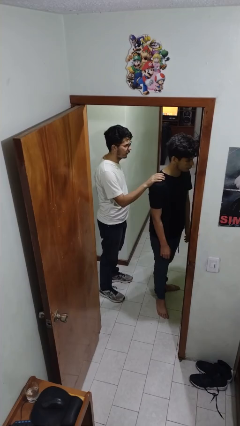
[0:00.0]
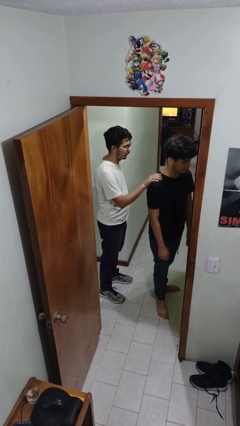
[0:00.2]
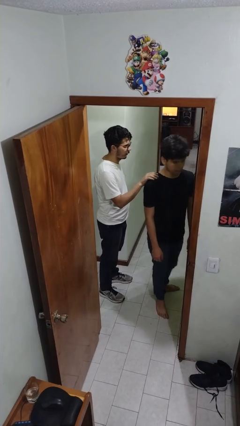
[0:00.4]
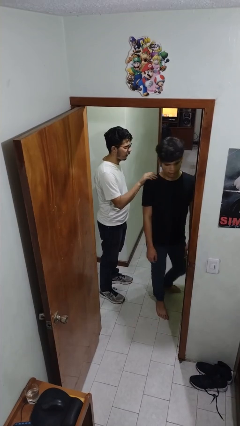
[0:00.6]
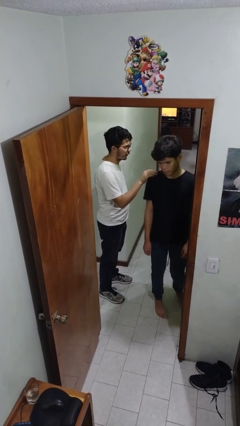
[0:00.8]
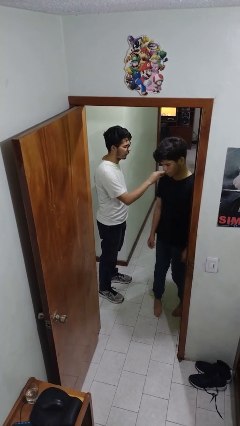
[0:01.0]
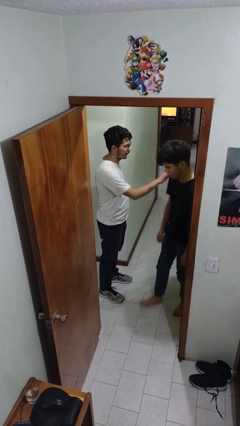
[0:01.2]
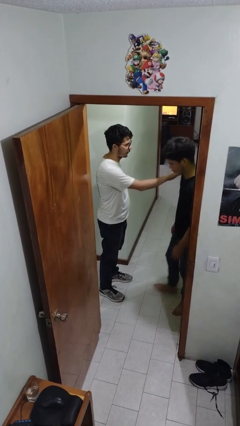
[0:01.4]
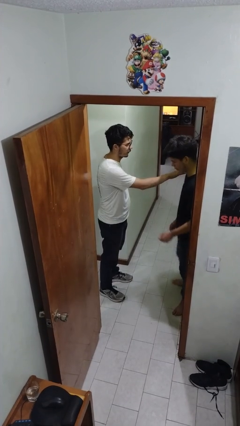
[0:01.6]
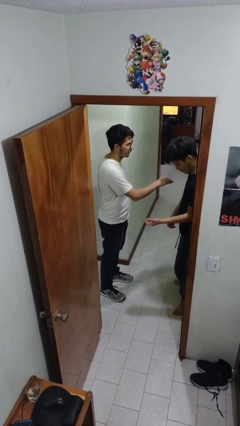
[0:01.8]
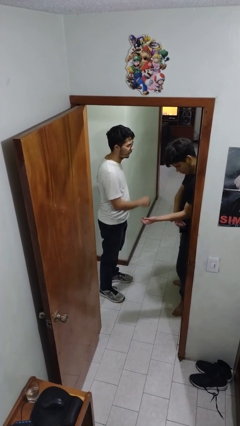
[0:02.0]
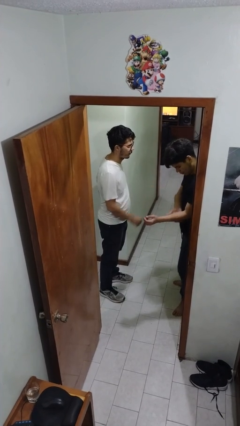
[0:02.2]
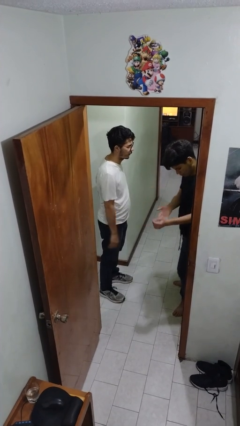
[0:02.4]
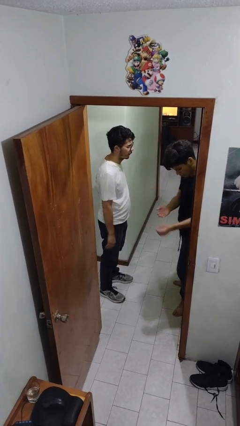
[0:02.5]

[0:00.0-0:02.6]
person spins person around

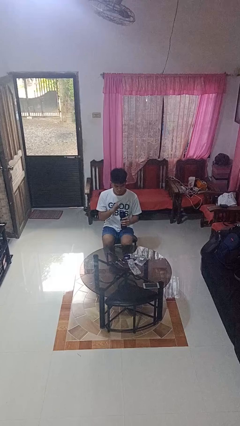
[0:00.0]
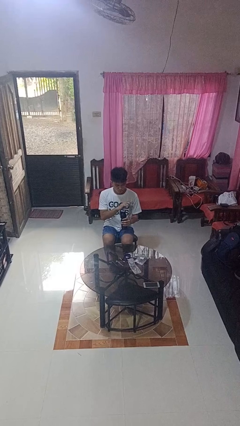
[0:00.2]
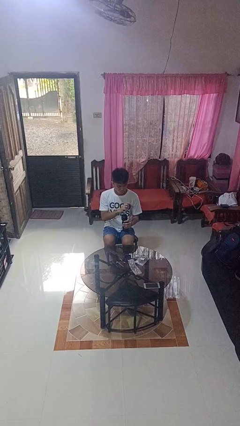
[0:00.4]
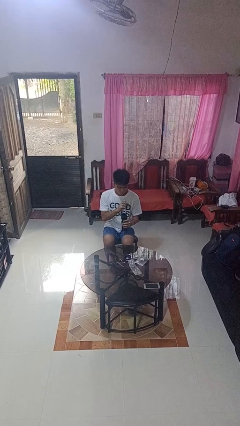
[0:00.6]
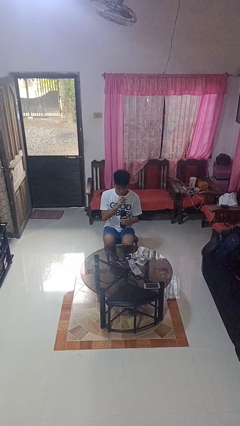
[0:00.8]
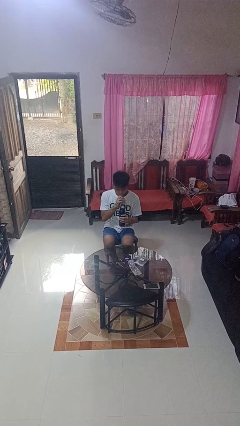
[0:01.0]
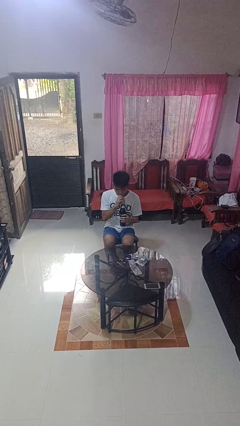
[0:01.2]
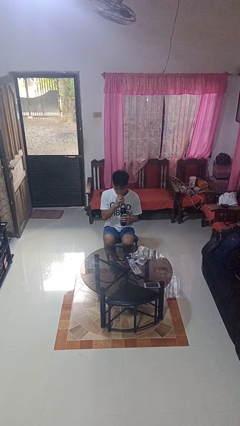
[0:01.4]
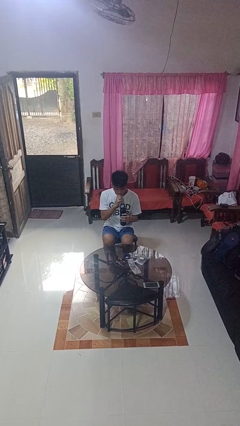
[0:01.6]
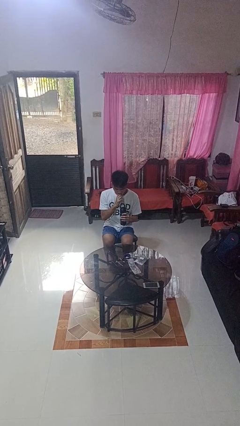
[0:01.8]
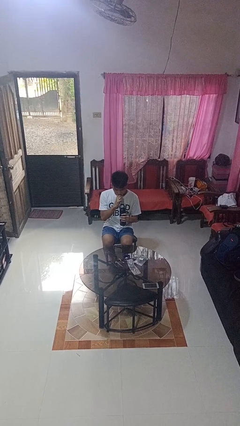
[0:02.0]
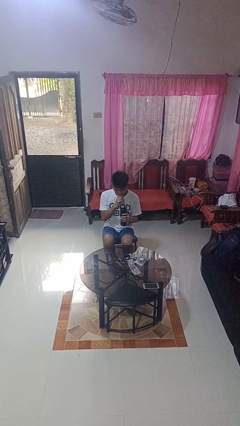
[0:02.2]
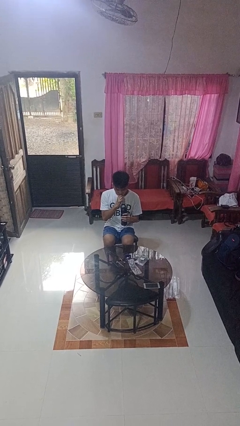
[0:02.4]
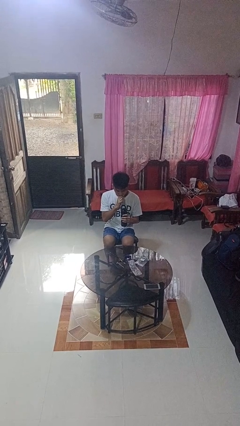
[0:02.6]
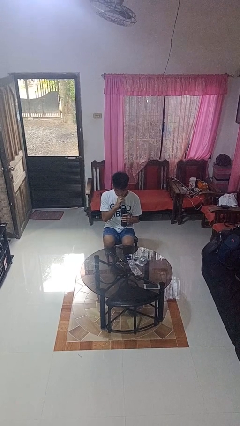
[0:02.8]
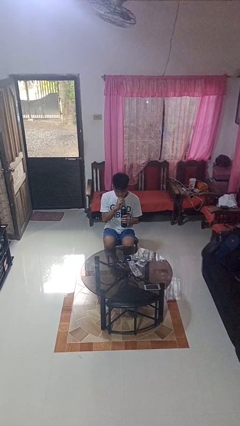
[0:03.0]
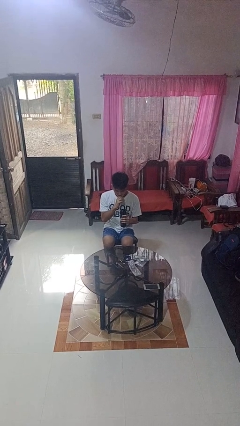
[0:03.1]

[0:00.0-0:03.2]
person drinks from straw

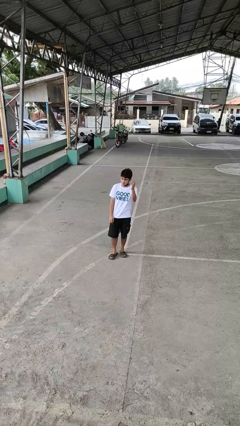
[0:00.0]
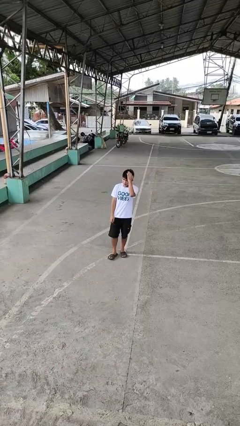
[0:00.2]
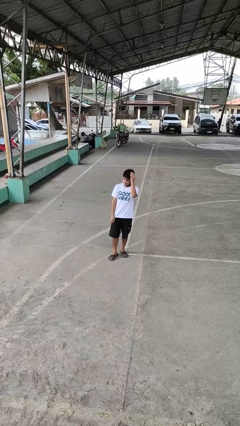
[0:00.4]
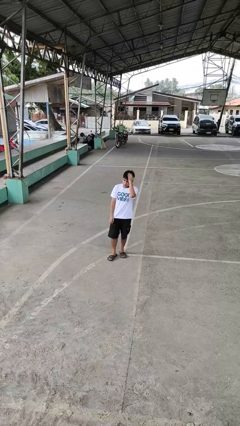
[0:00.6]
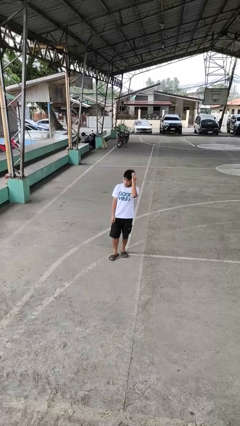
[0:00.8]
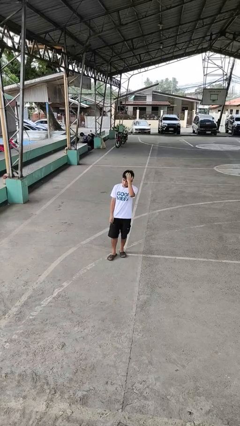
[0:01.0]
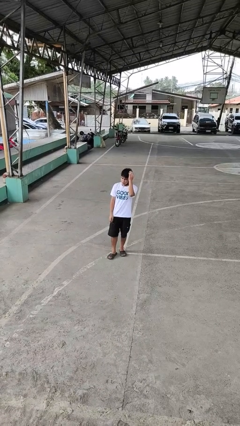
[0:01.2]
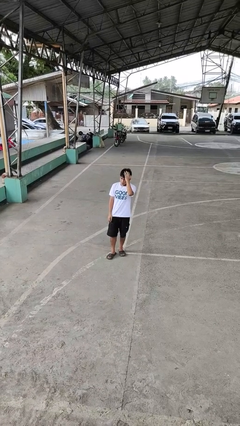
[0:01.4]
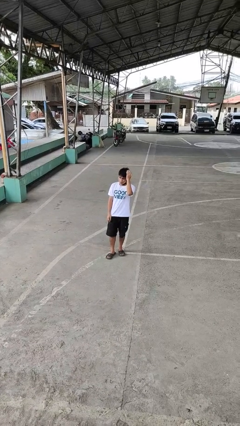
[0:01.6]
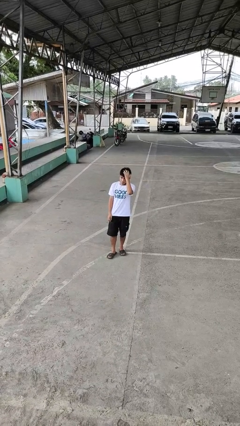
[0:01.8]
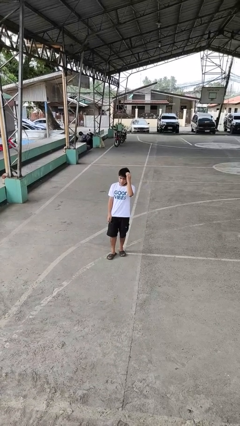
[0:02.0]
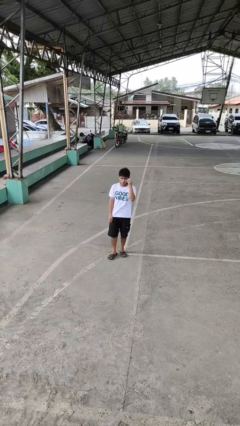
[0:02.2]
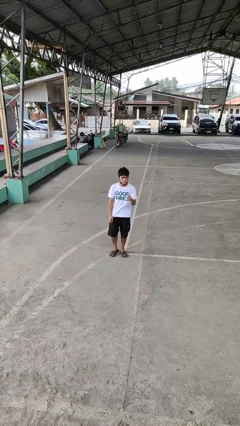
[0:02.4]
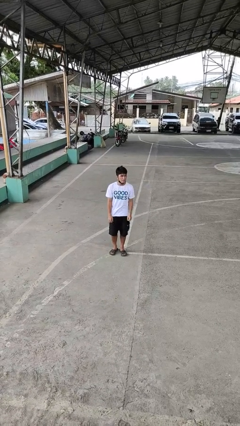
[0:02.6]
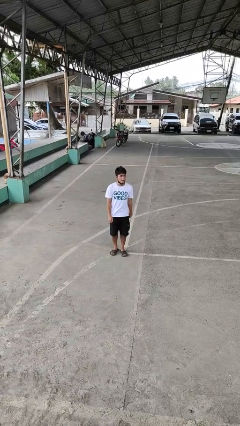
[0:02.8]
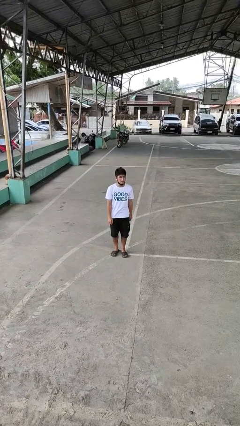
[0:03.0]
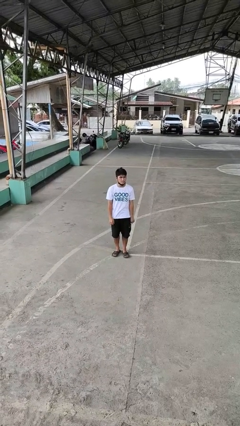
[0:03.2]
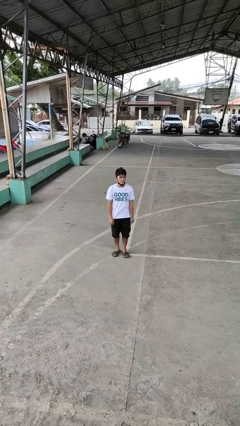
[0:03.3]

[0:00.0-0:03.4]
person pats head

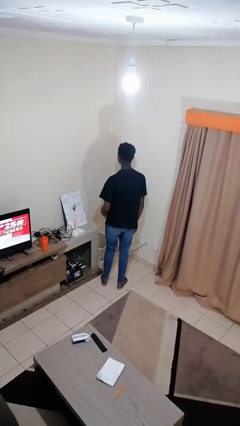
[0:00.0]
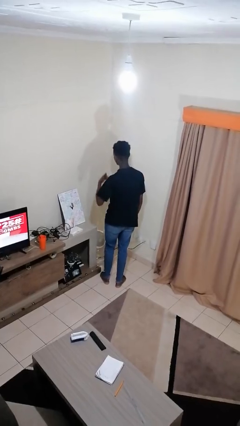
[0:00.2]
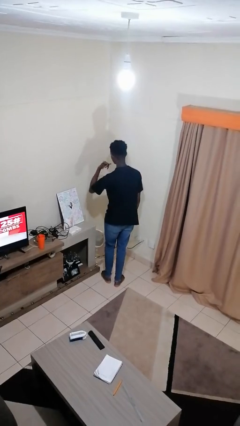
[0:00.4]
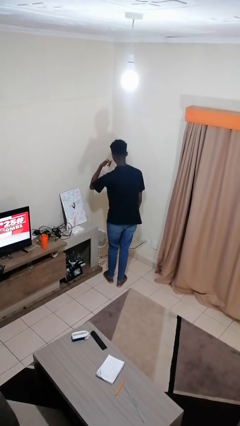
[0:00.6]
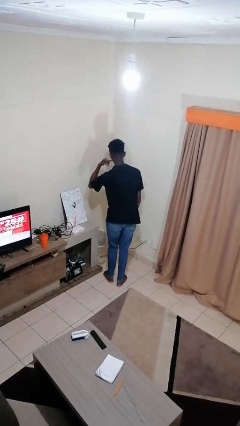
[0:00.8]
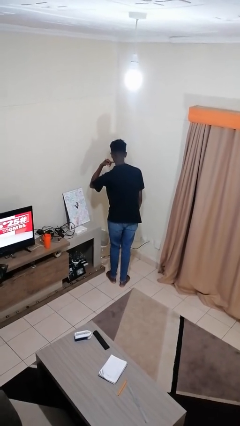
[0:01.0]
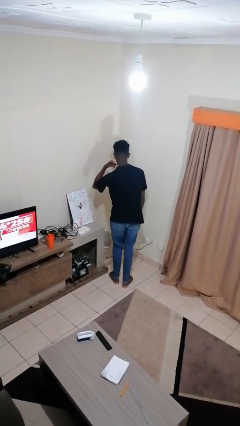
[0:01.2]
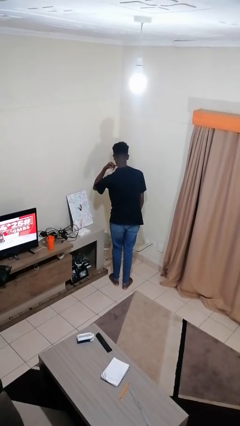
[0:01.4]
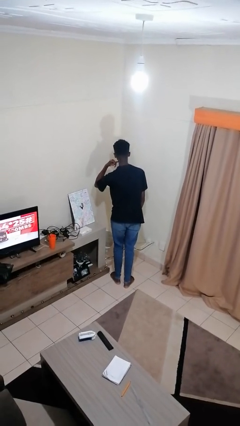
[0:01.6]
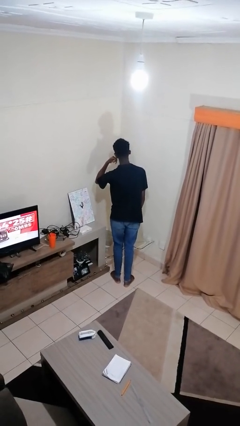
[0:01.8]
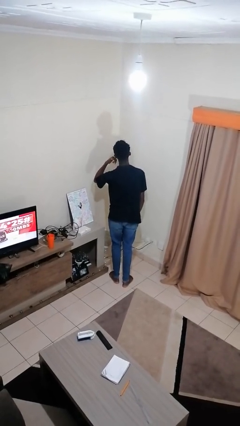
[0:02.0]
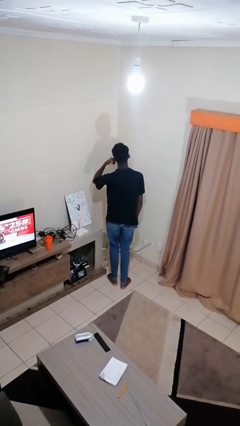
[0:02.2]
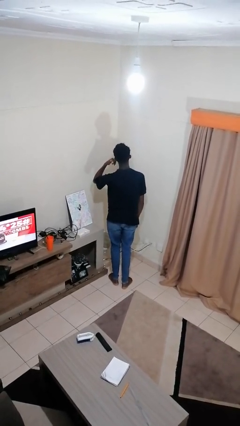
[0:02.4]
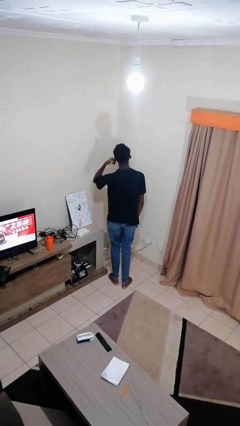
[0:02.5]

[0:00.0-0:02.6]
person gestures call me

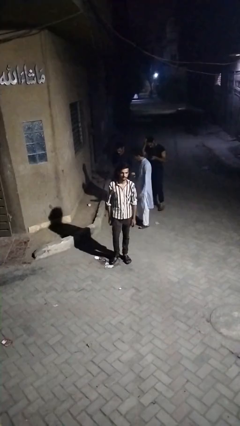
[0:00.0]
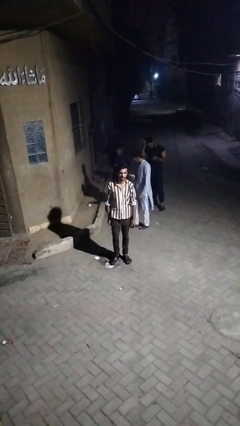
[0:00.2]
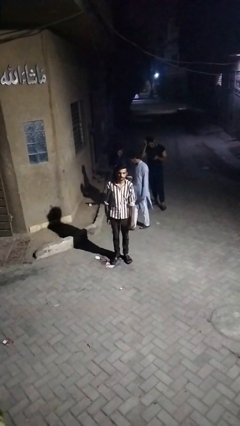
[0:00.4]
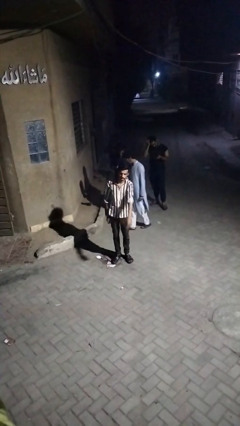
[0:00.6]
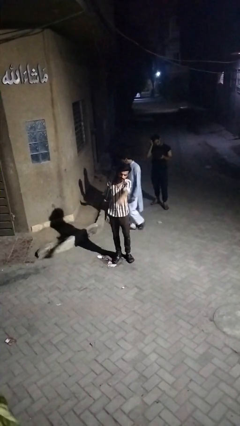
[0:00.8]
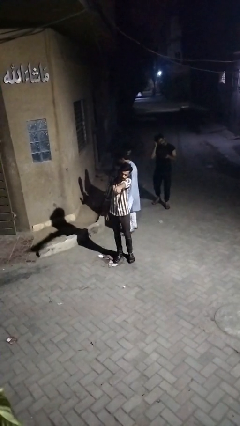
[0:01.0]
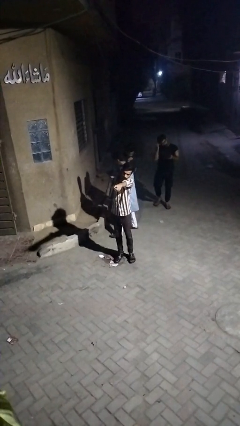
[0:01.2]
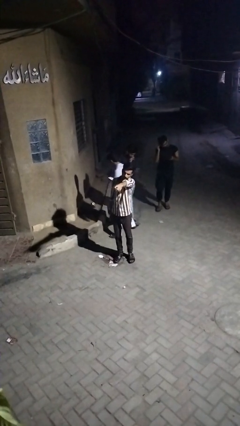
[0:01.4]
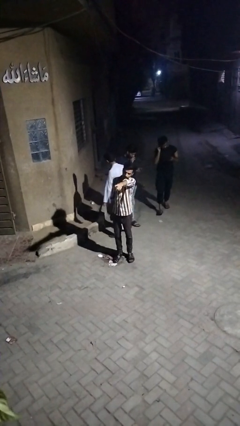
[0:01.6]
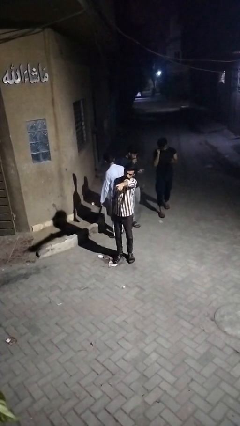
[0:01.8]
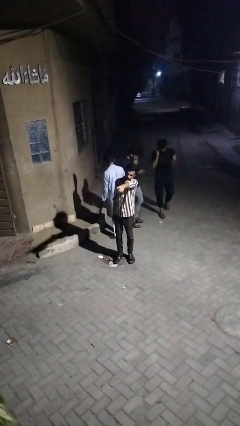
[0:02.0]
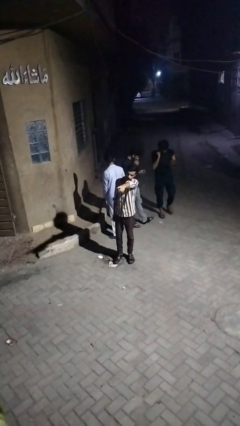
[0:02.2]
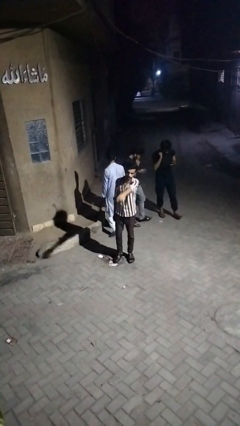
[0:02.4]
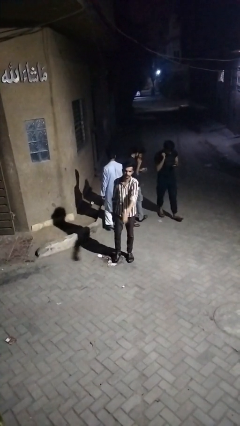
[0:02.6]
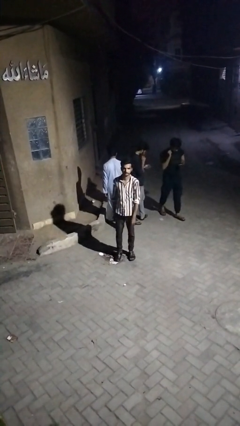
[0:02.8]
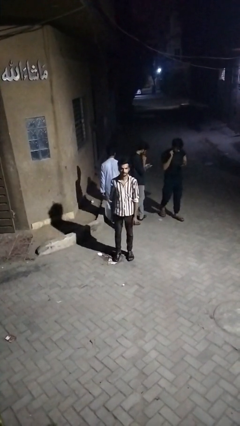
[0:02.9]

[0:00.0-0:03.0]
person points at person

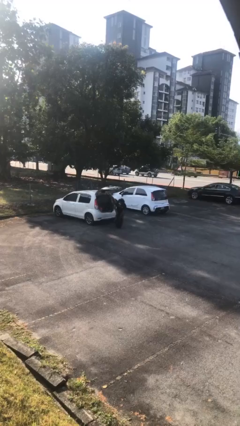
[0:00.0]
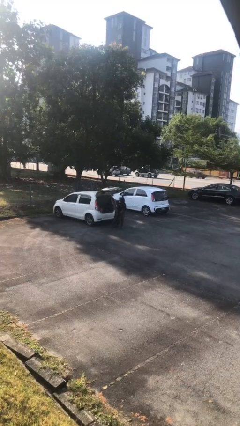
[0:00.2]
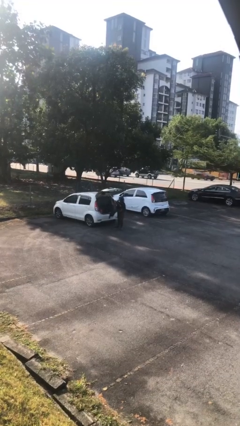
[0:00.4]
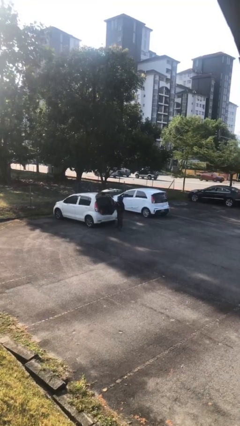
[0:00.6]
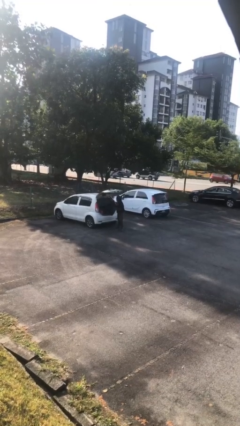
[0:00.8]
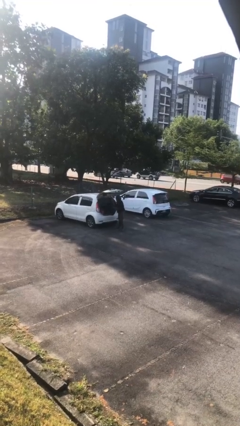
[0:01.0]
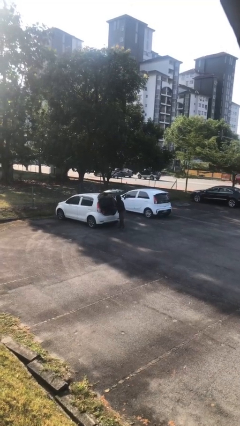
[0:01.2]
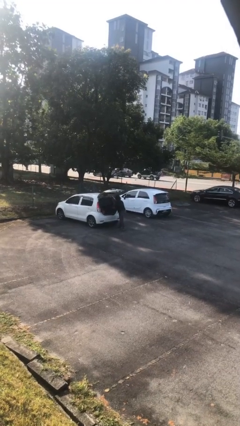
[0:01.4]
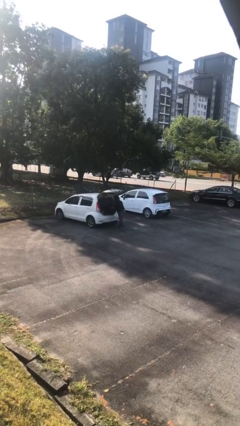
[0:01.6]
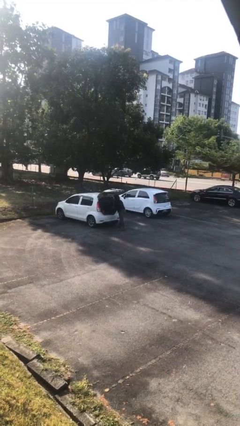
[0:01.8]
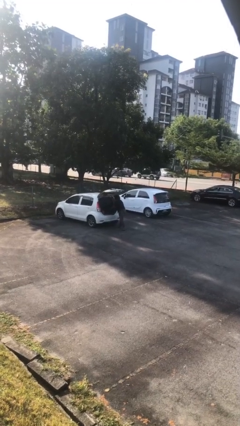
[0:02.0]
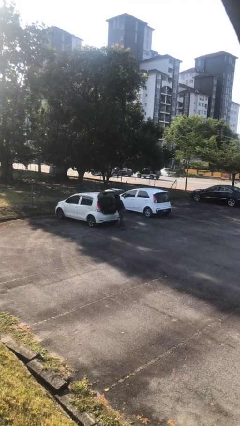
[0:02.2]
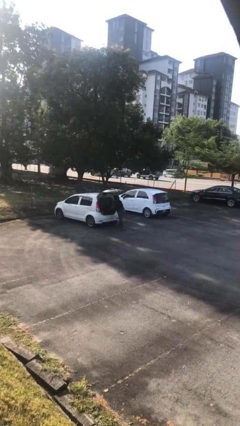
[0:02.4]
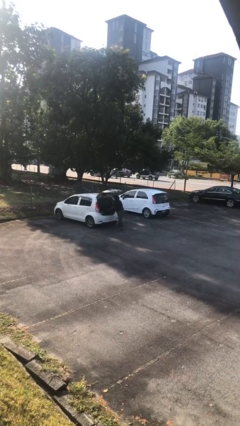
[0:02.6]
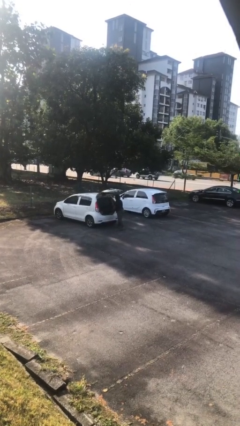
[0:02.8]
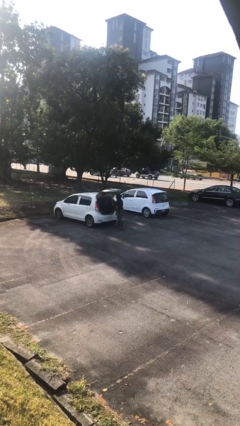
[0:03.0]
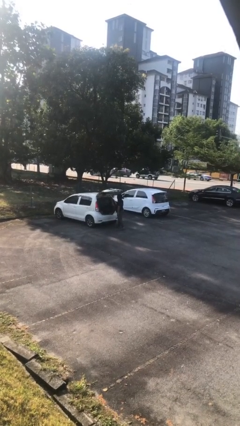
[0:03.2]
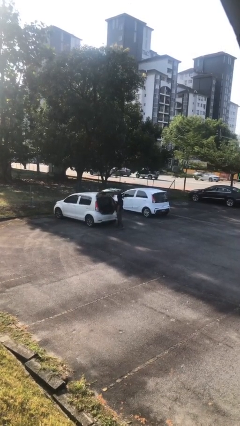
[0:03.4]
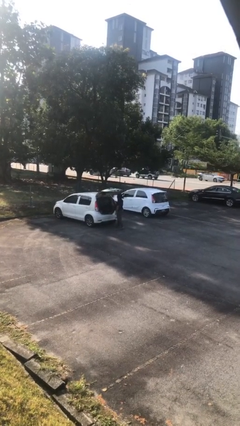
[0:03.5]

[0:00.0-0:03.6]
person loads car
